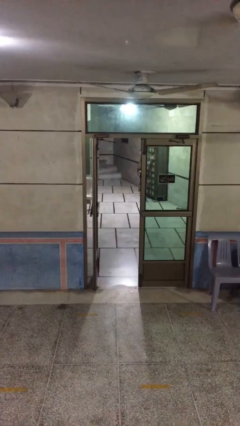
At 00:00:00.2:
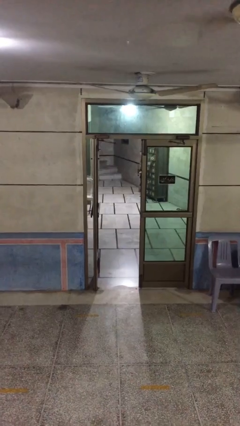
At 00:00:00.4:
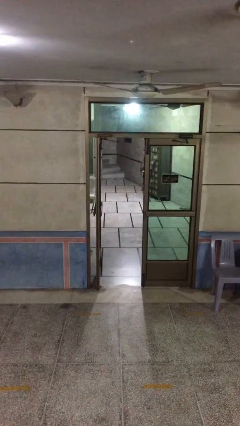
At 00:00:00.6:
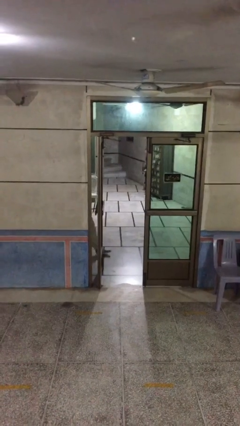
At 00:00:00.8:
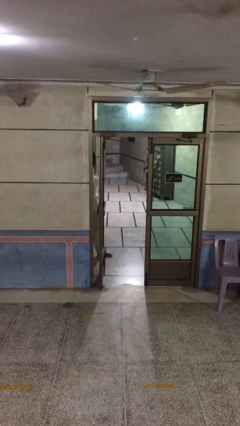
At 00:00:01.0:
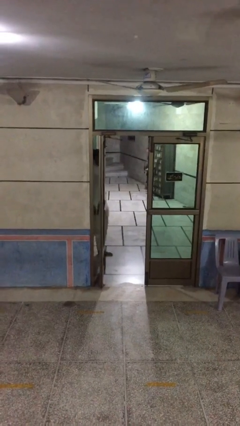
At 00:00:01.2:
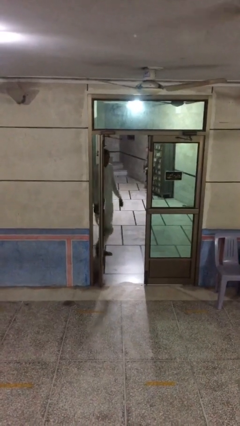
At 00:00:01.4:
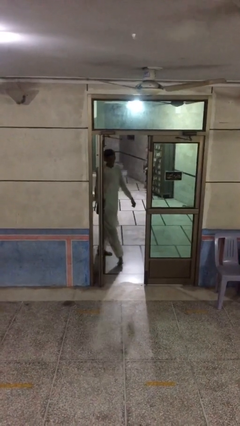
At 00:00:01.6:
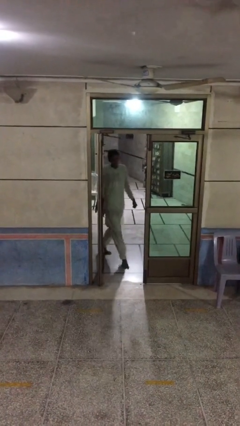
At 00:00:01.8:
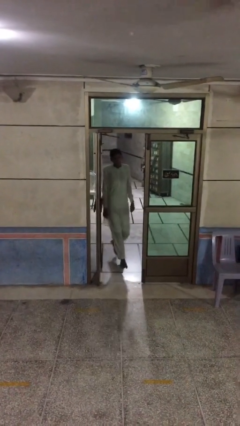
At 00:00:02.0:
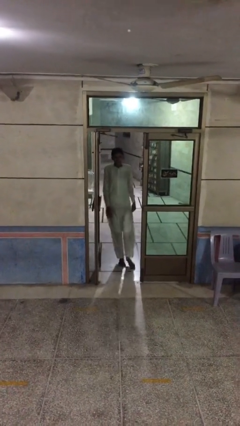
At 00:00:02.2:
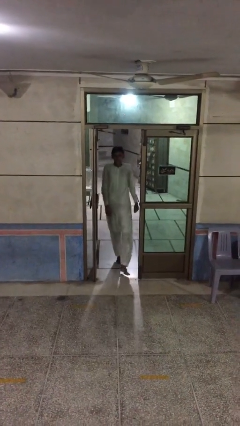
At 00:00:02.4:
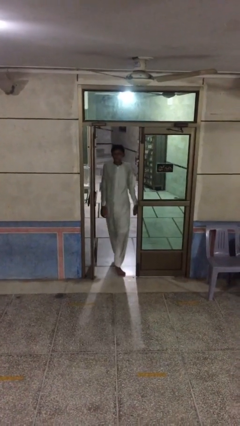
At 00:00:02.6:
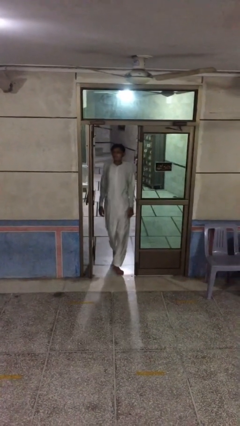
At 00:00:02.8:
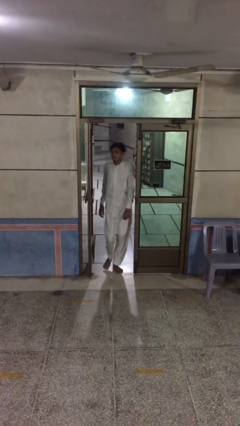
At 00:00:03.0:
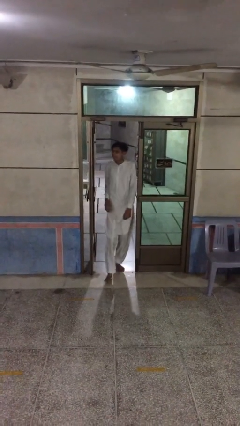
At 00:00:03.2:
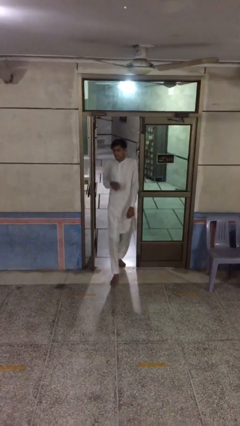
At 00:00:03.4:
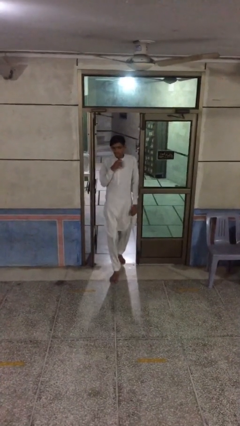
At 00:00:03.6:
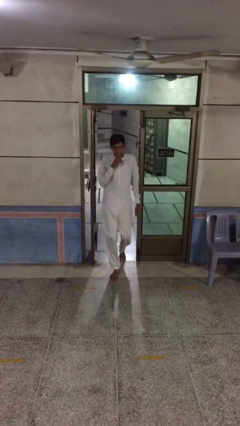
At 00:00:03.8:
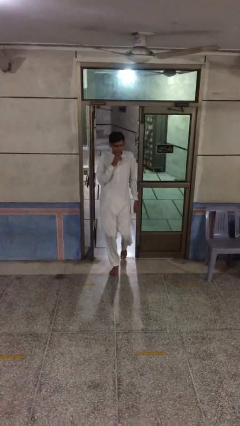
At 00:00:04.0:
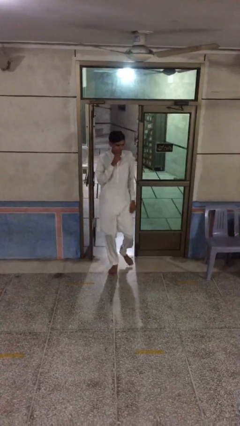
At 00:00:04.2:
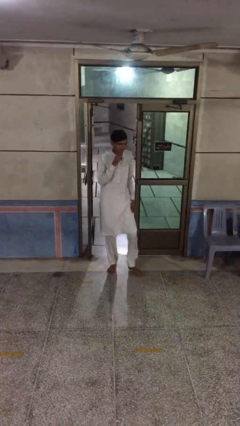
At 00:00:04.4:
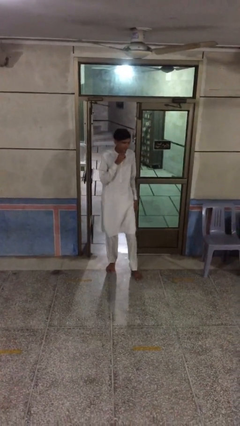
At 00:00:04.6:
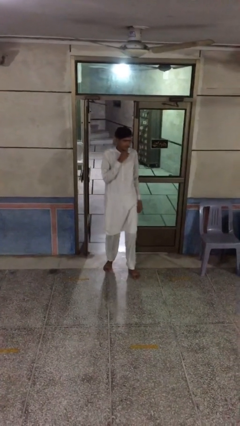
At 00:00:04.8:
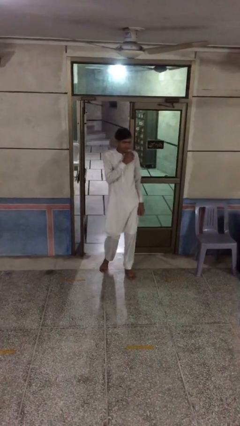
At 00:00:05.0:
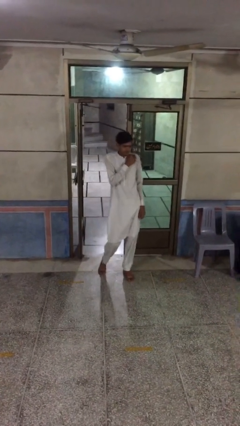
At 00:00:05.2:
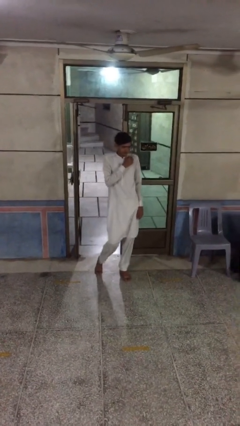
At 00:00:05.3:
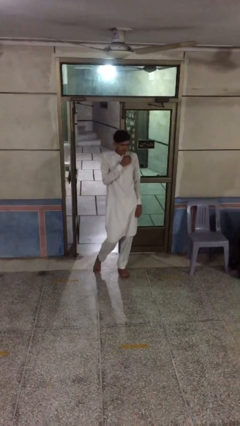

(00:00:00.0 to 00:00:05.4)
person enters scene through structure

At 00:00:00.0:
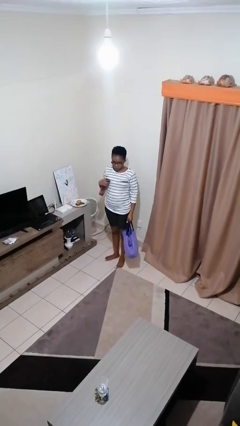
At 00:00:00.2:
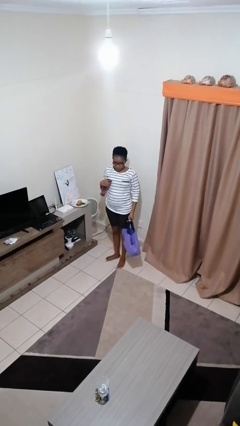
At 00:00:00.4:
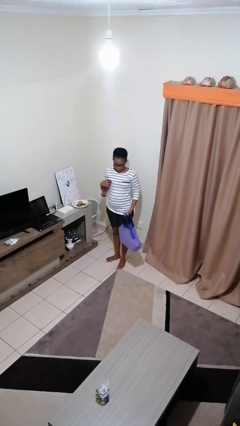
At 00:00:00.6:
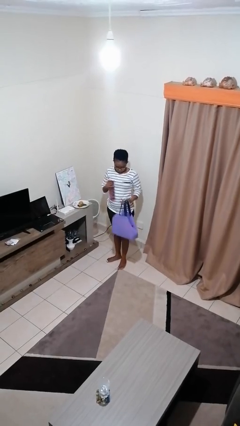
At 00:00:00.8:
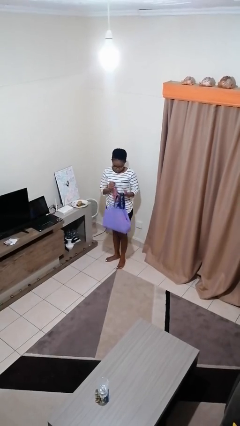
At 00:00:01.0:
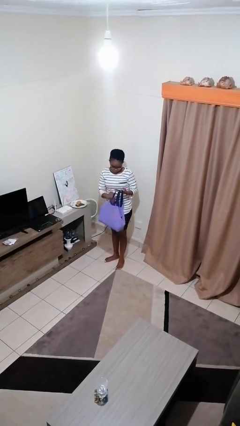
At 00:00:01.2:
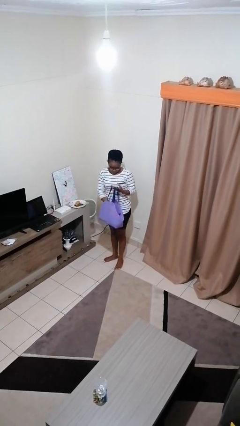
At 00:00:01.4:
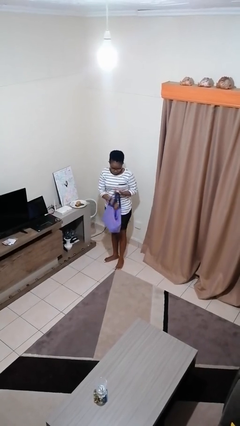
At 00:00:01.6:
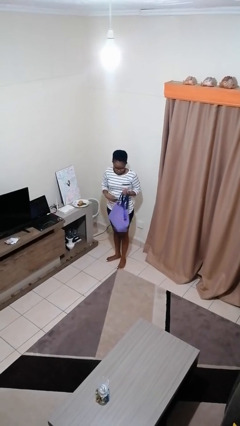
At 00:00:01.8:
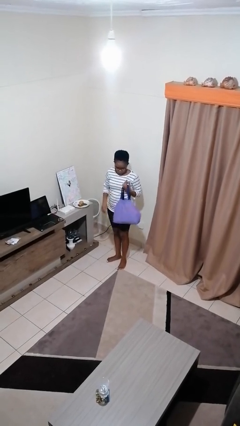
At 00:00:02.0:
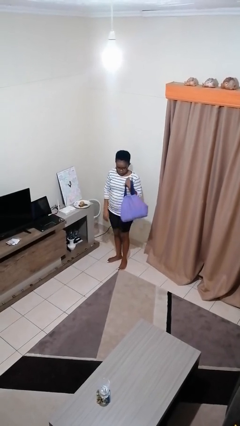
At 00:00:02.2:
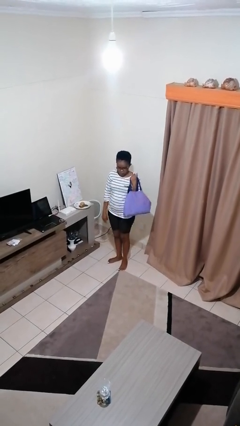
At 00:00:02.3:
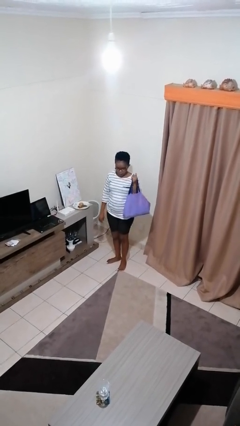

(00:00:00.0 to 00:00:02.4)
person puts object into bag

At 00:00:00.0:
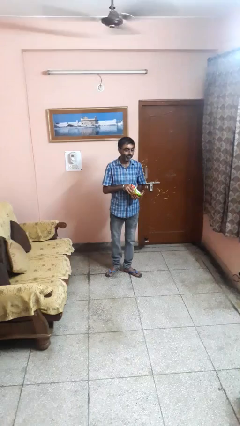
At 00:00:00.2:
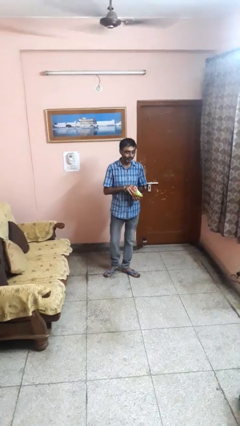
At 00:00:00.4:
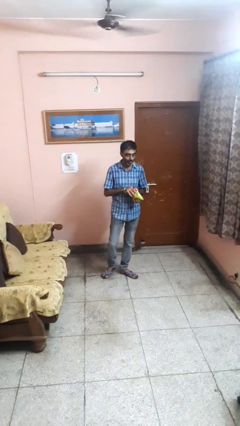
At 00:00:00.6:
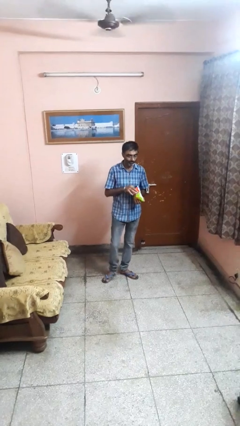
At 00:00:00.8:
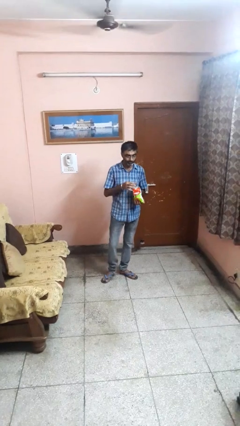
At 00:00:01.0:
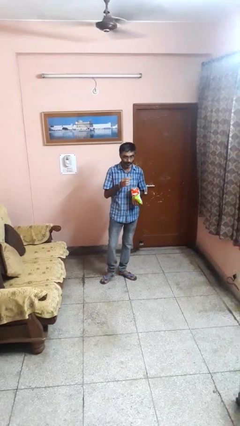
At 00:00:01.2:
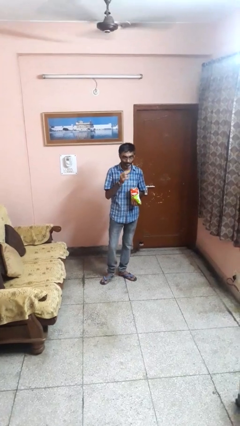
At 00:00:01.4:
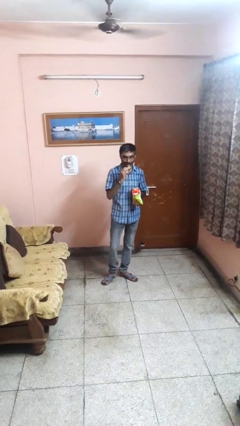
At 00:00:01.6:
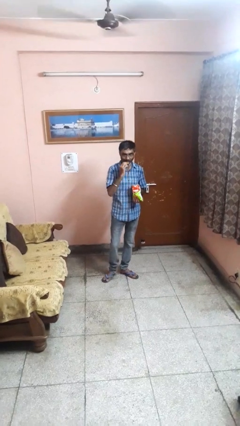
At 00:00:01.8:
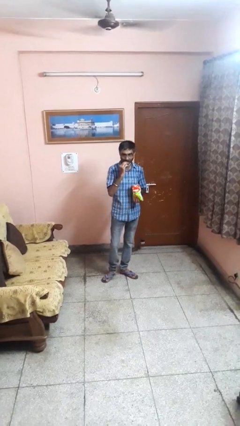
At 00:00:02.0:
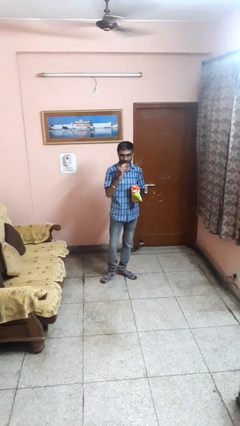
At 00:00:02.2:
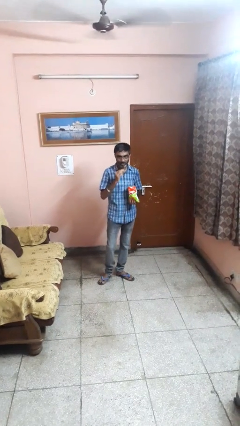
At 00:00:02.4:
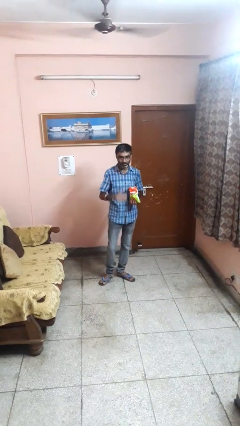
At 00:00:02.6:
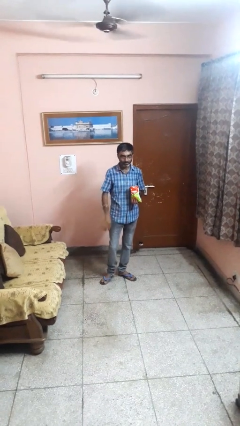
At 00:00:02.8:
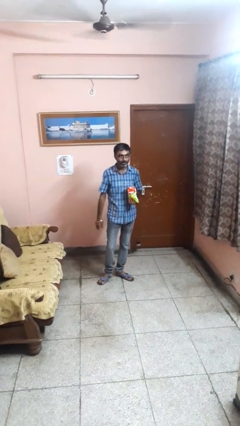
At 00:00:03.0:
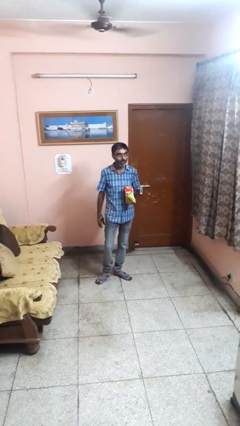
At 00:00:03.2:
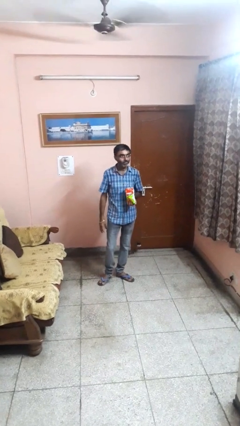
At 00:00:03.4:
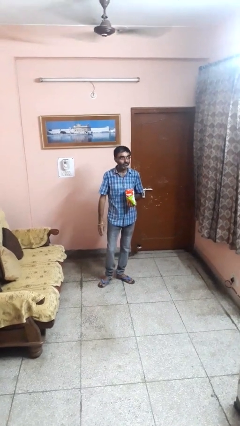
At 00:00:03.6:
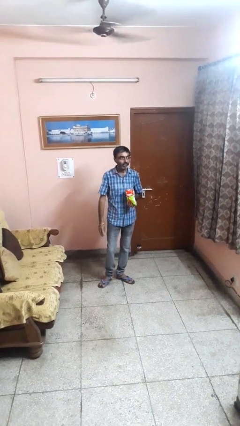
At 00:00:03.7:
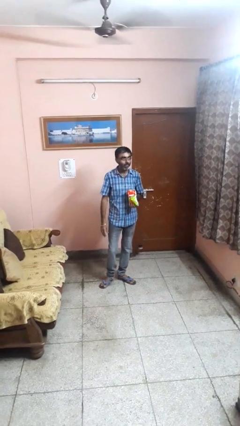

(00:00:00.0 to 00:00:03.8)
person eats snack from bag

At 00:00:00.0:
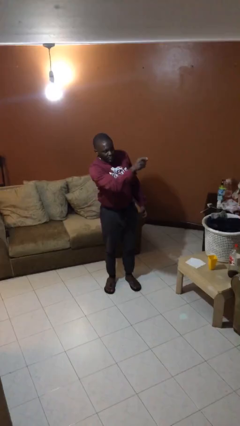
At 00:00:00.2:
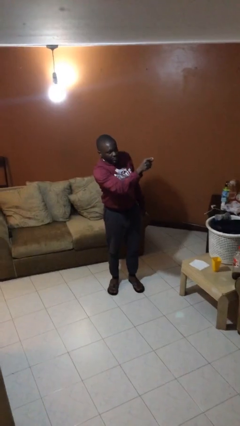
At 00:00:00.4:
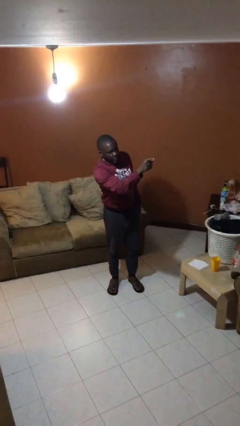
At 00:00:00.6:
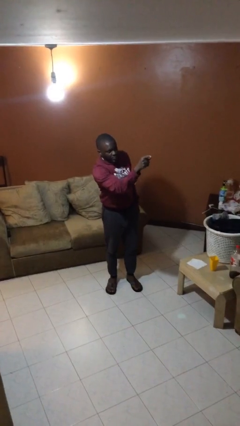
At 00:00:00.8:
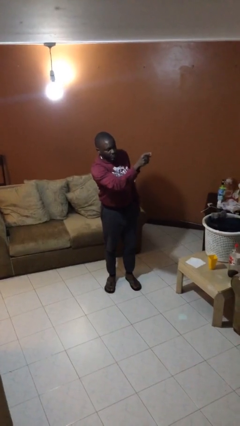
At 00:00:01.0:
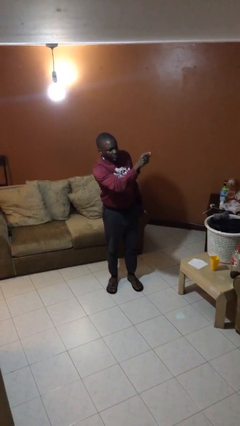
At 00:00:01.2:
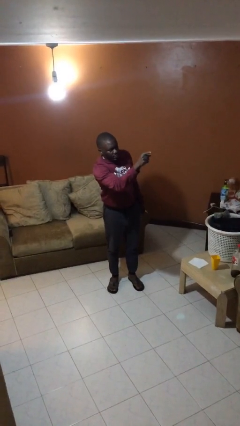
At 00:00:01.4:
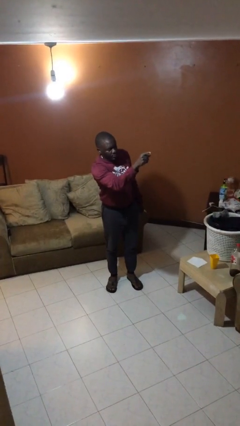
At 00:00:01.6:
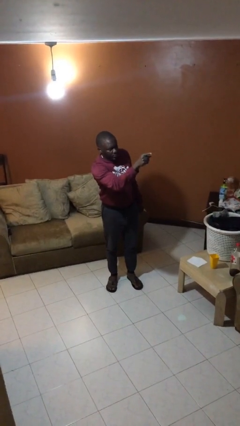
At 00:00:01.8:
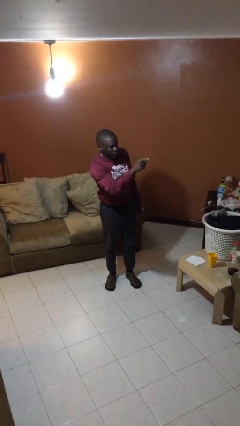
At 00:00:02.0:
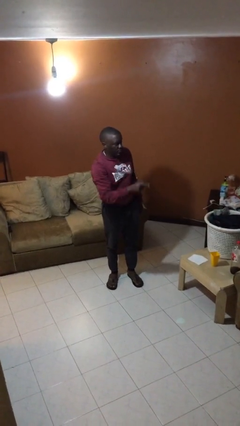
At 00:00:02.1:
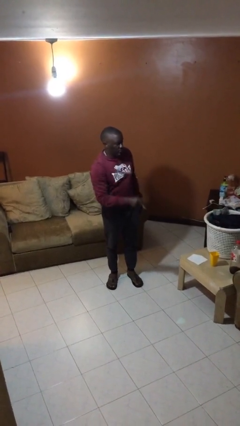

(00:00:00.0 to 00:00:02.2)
person points at person

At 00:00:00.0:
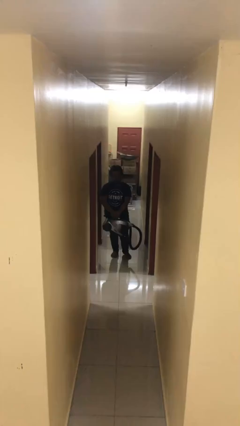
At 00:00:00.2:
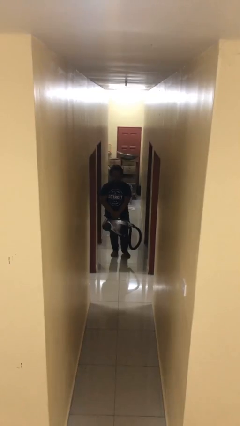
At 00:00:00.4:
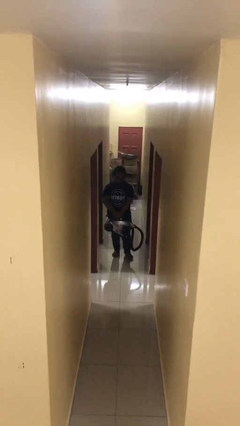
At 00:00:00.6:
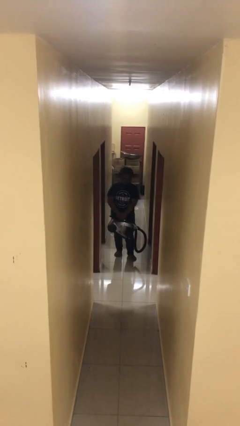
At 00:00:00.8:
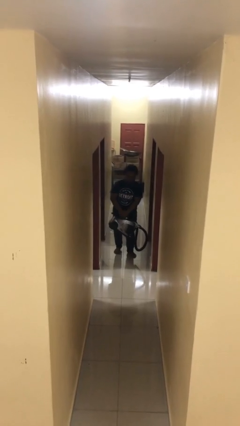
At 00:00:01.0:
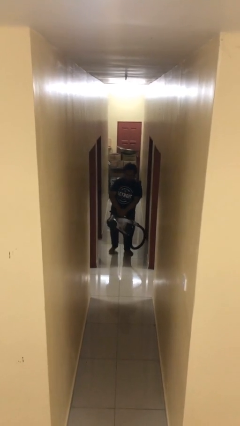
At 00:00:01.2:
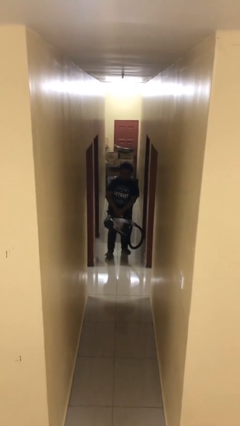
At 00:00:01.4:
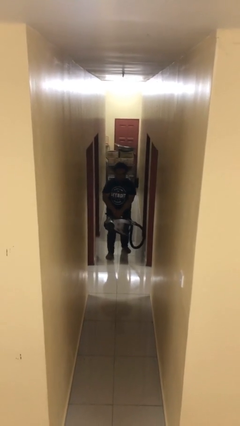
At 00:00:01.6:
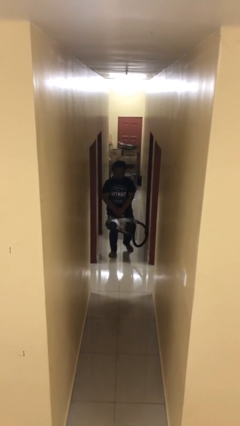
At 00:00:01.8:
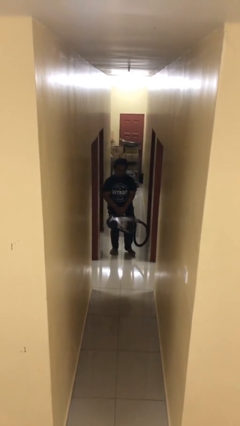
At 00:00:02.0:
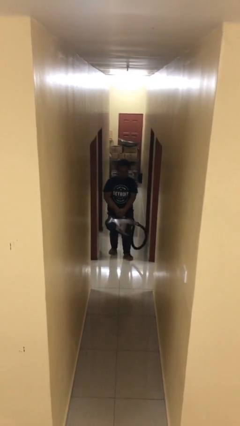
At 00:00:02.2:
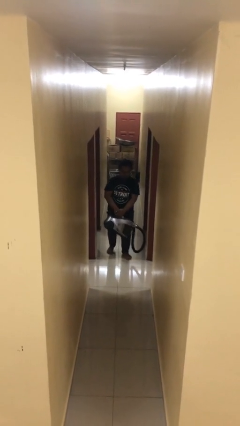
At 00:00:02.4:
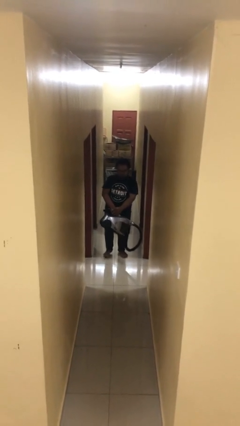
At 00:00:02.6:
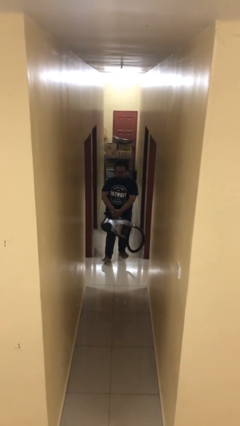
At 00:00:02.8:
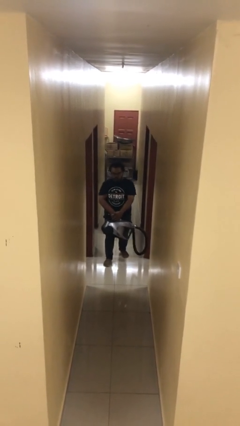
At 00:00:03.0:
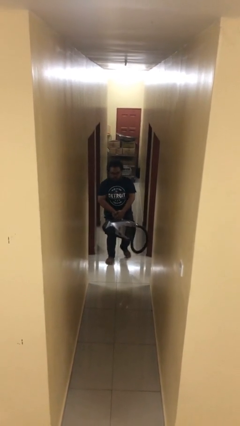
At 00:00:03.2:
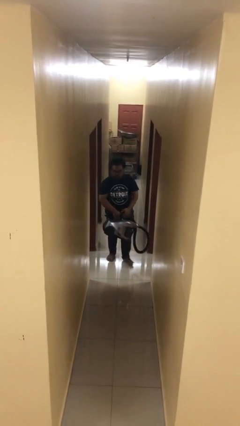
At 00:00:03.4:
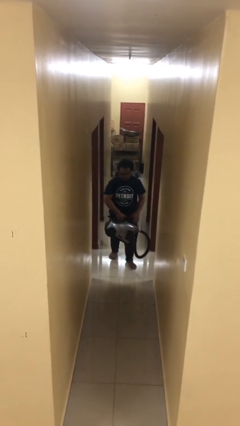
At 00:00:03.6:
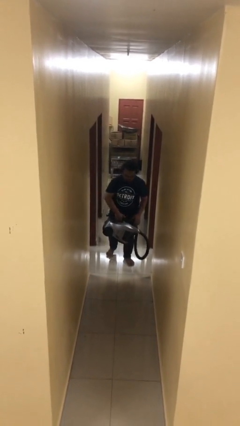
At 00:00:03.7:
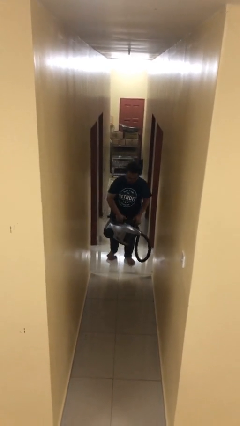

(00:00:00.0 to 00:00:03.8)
person carries heavy object
